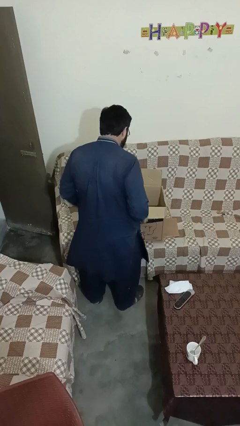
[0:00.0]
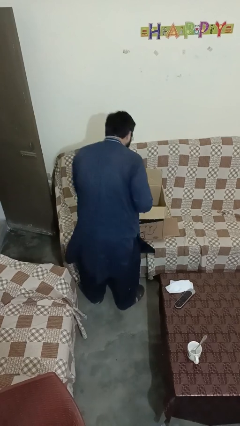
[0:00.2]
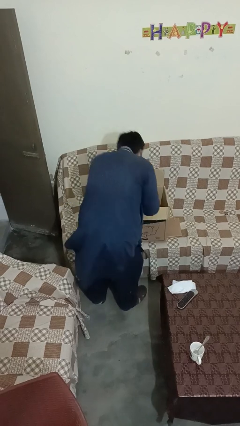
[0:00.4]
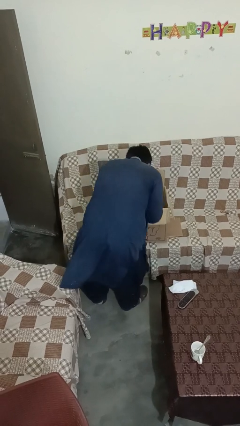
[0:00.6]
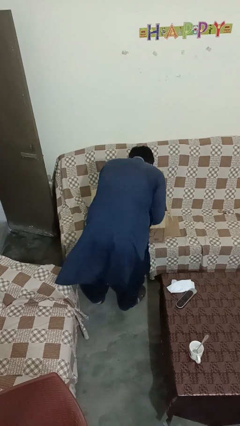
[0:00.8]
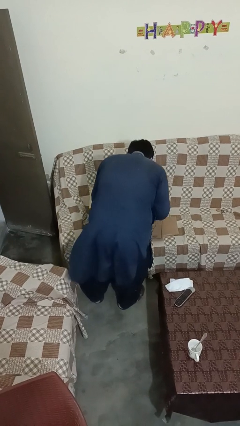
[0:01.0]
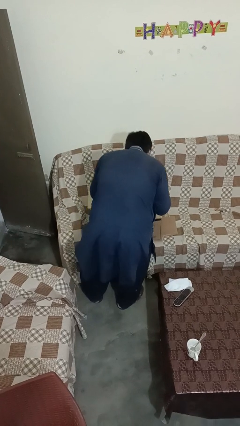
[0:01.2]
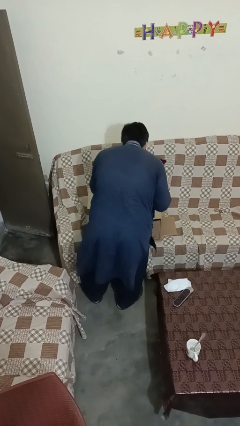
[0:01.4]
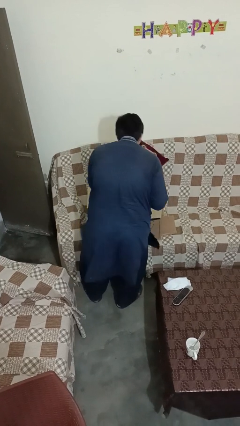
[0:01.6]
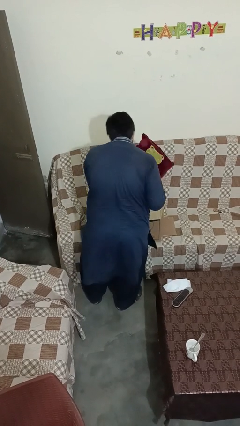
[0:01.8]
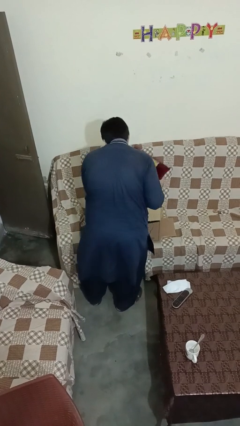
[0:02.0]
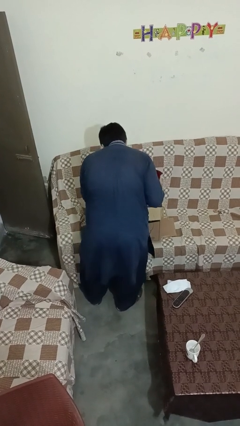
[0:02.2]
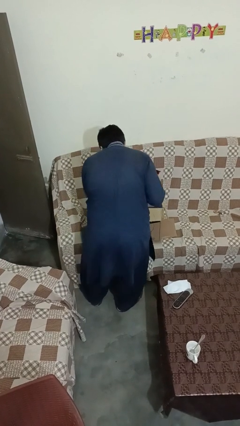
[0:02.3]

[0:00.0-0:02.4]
person searches in box

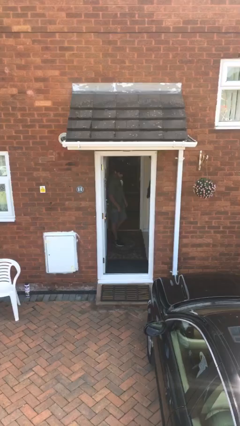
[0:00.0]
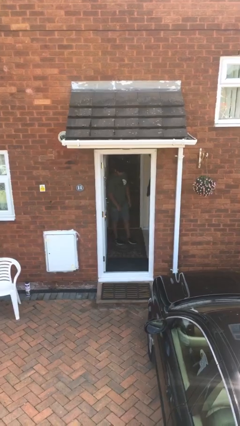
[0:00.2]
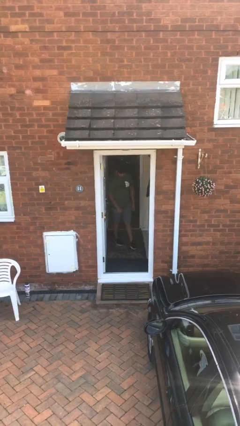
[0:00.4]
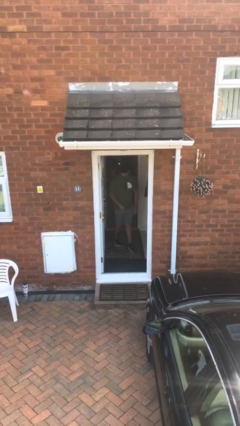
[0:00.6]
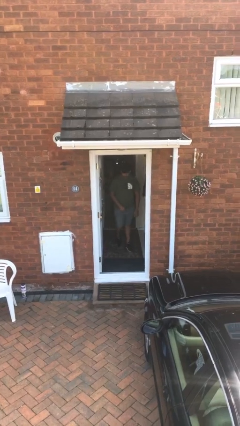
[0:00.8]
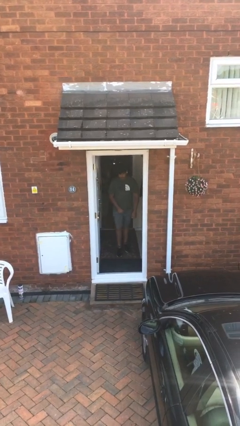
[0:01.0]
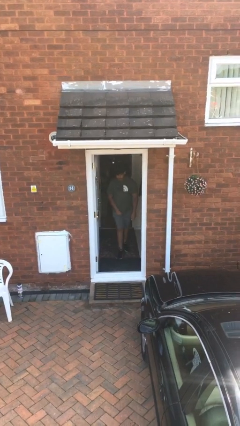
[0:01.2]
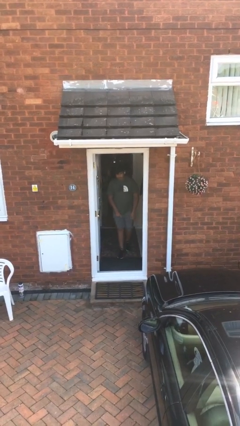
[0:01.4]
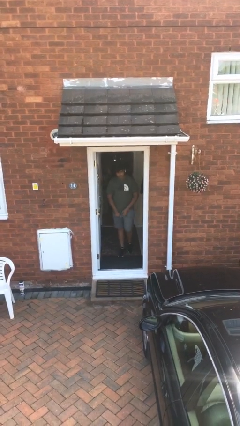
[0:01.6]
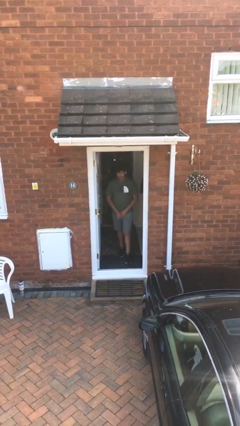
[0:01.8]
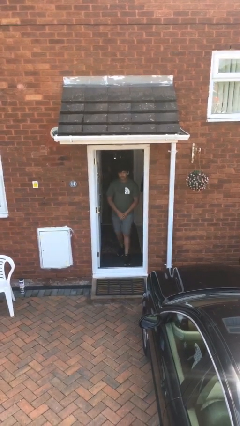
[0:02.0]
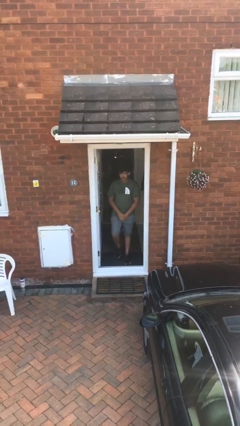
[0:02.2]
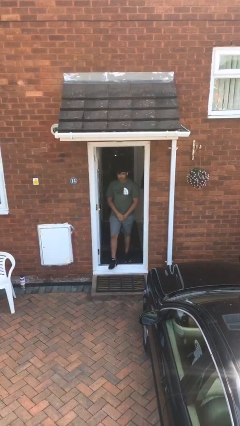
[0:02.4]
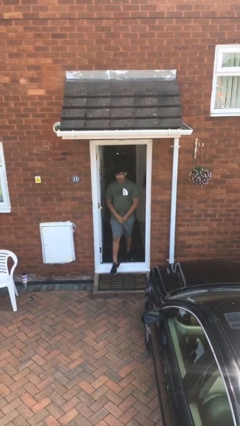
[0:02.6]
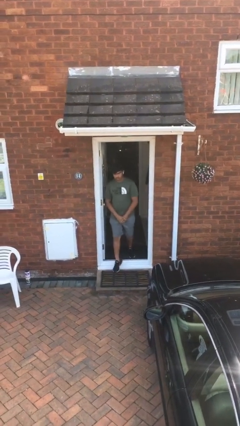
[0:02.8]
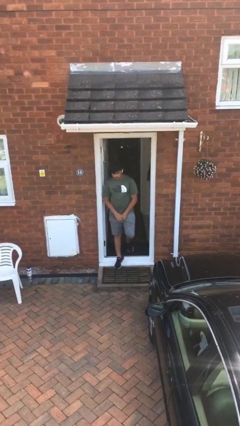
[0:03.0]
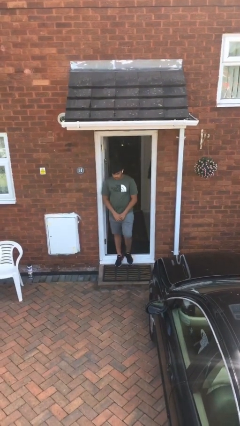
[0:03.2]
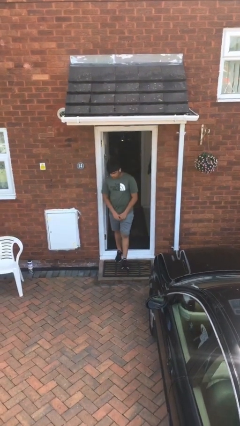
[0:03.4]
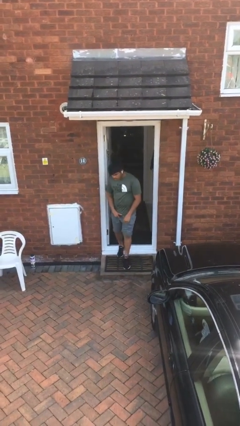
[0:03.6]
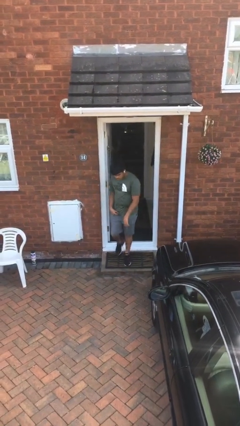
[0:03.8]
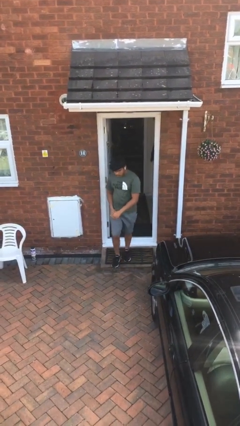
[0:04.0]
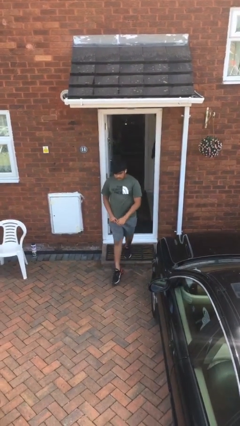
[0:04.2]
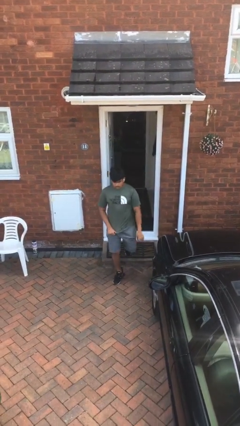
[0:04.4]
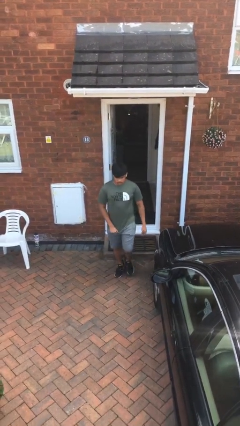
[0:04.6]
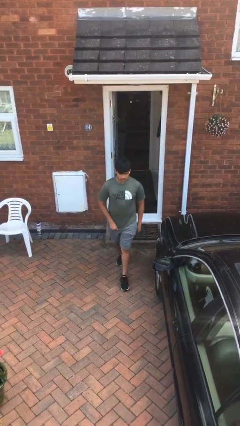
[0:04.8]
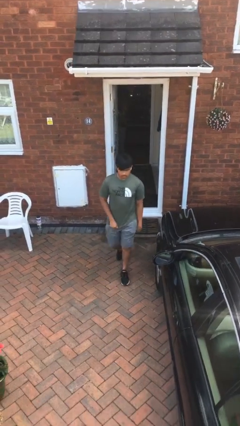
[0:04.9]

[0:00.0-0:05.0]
person enters scene through structure

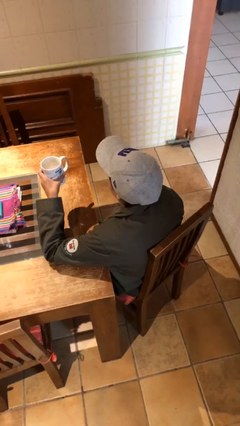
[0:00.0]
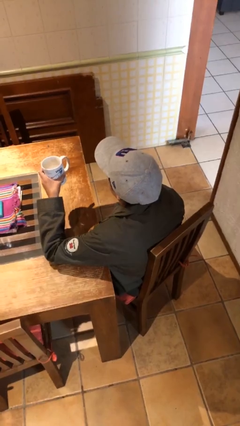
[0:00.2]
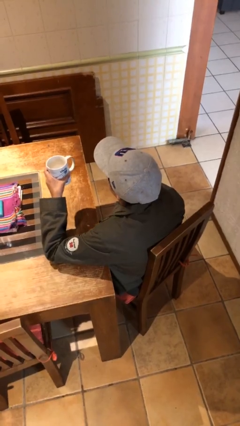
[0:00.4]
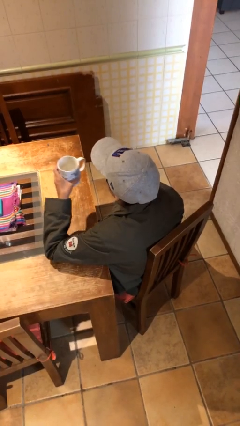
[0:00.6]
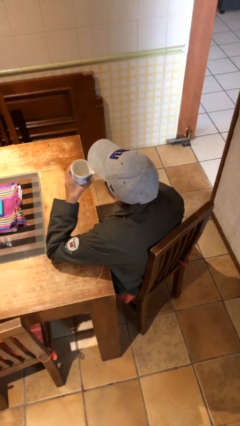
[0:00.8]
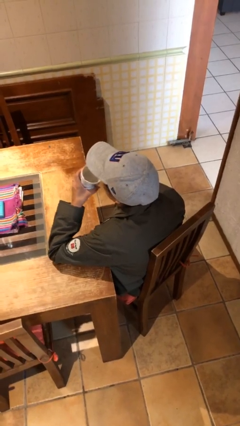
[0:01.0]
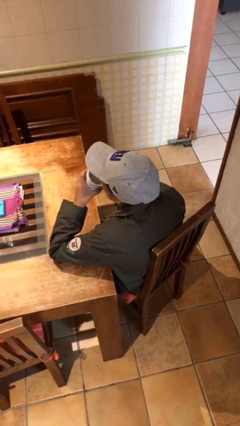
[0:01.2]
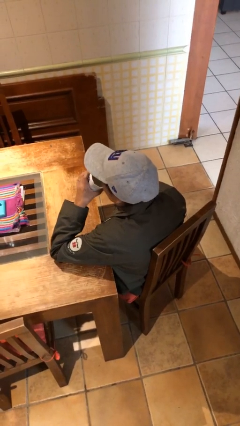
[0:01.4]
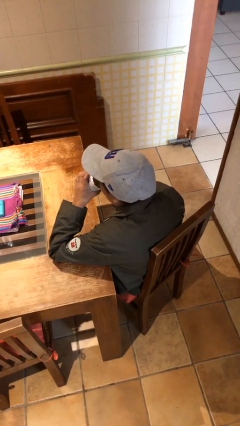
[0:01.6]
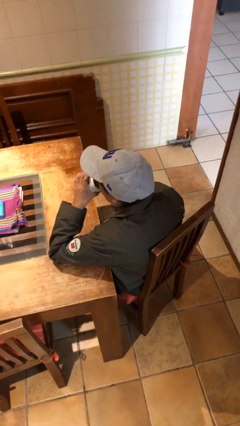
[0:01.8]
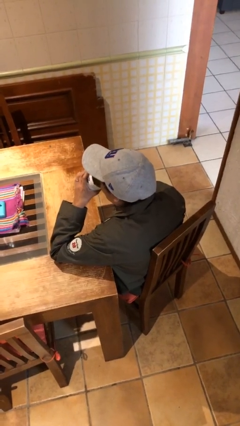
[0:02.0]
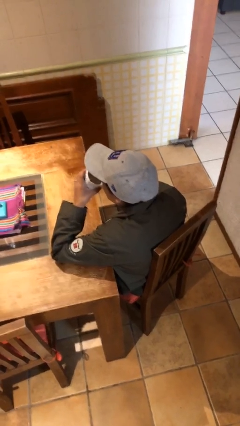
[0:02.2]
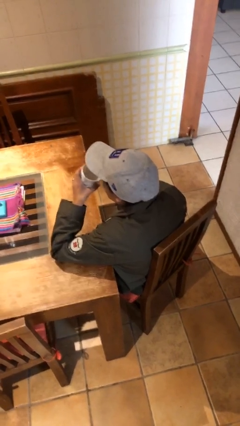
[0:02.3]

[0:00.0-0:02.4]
person drinks from mug

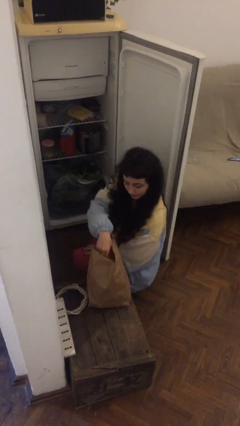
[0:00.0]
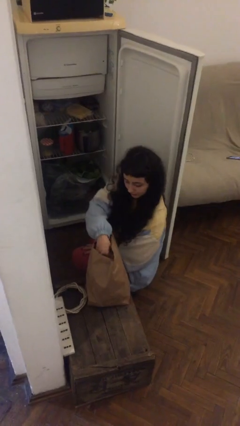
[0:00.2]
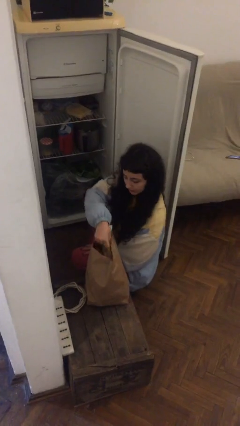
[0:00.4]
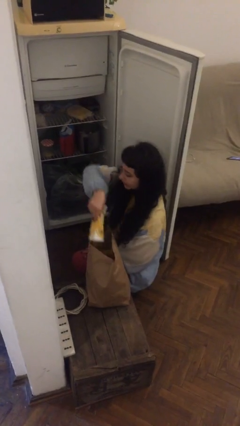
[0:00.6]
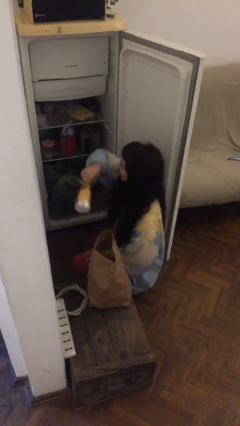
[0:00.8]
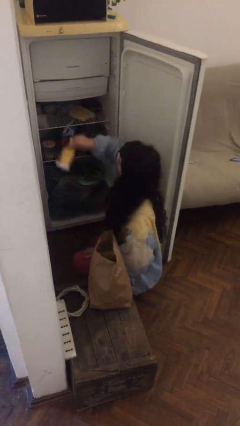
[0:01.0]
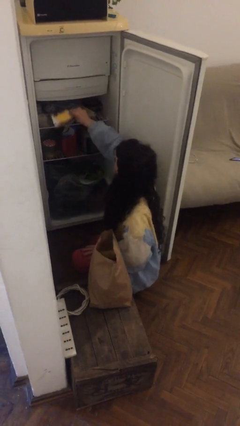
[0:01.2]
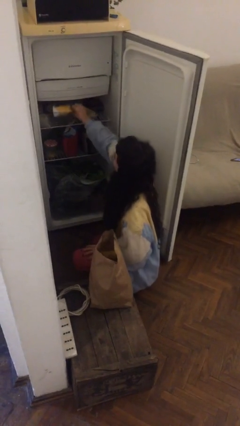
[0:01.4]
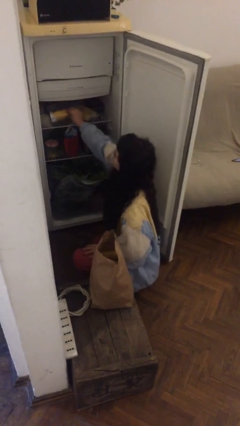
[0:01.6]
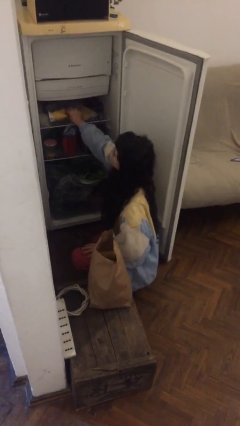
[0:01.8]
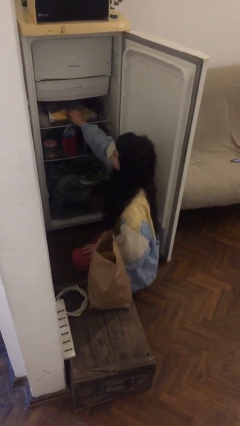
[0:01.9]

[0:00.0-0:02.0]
person loads groceries into refrigerator

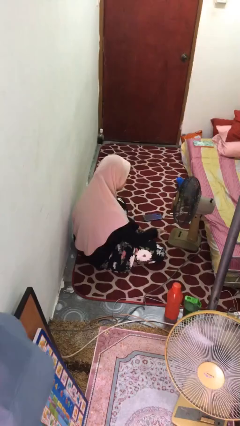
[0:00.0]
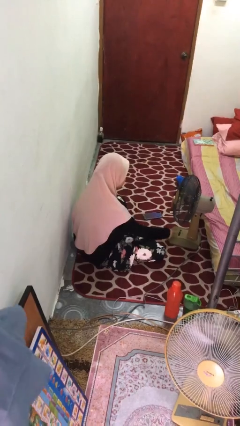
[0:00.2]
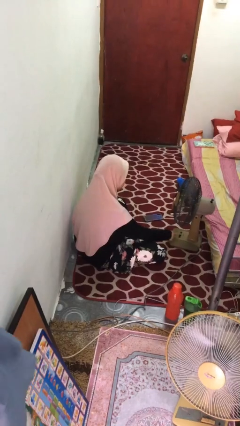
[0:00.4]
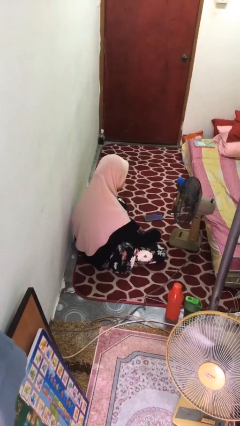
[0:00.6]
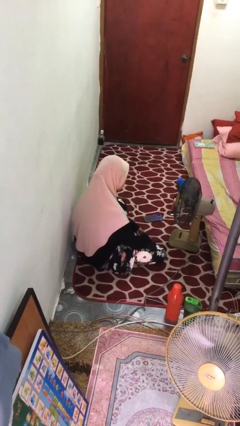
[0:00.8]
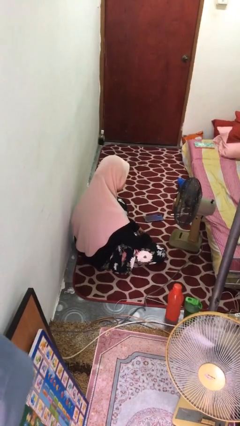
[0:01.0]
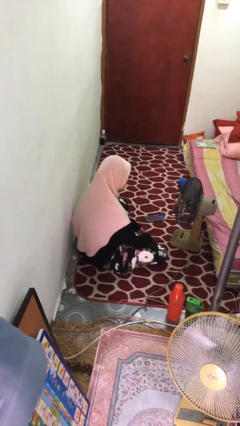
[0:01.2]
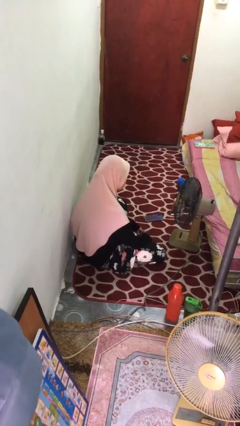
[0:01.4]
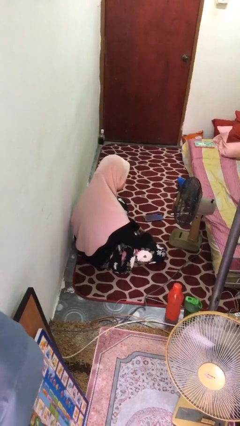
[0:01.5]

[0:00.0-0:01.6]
person turns on fan

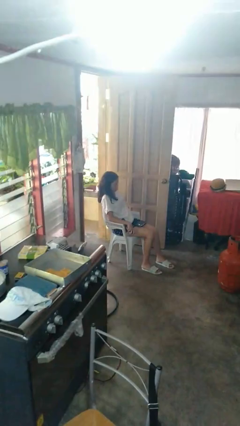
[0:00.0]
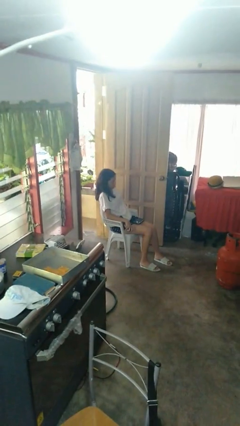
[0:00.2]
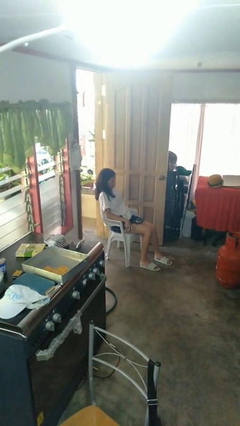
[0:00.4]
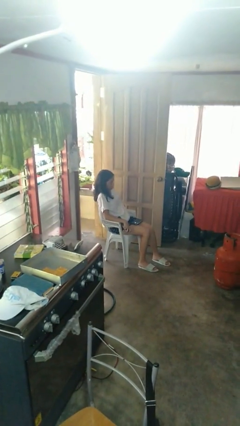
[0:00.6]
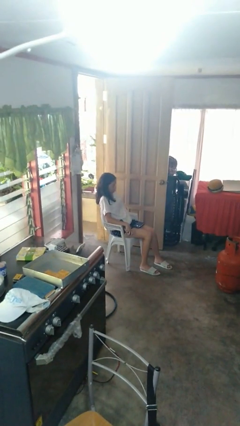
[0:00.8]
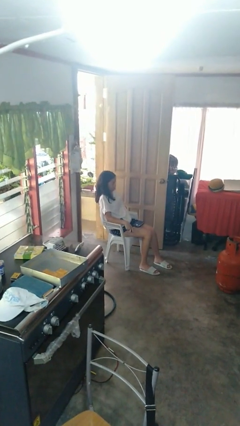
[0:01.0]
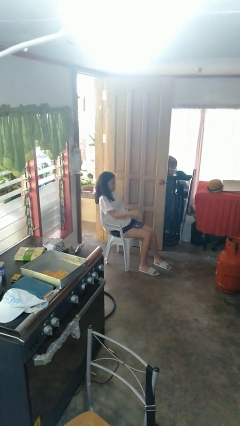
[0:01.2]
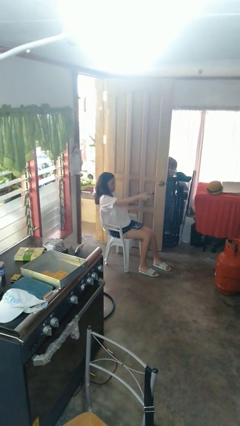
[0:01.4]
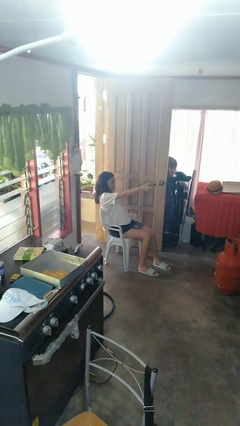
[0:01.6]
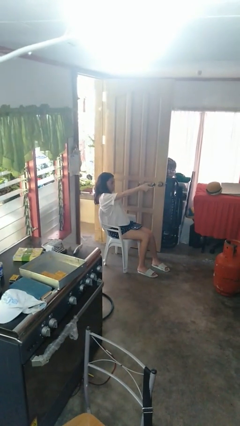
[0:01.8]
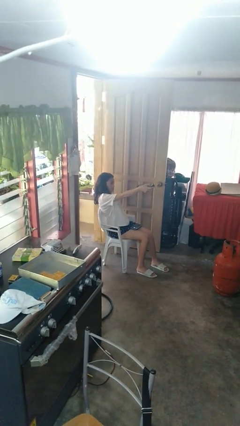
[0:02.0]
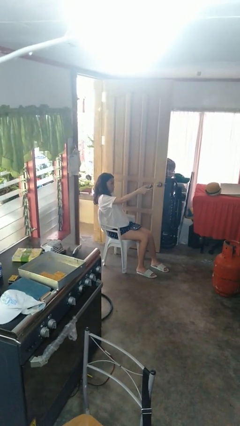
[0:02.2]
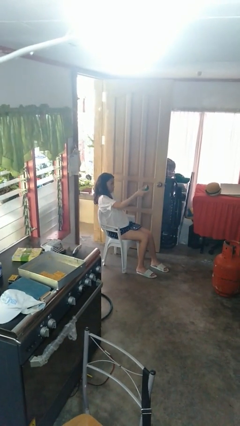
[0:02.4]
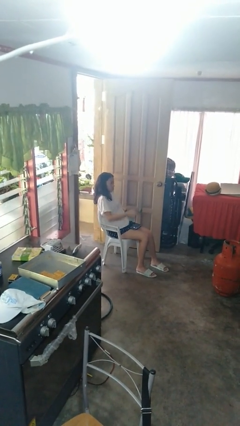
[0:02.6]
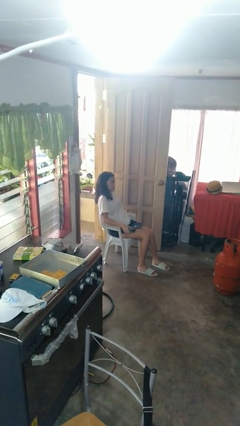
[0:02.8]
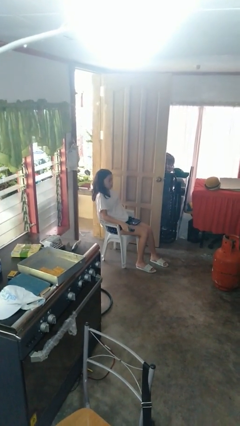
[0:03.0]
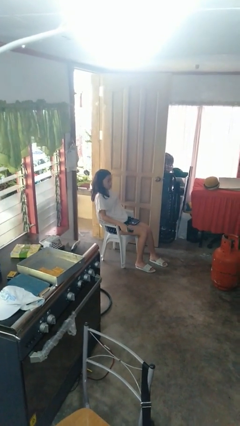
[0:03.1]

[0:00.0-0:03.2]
person uses television remote

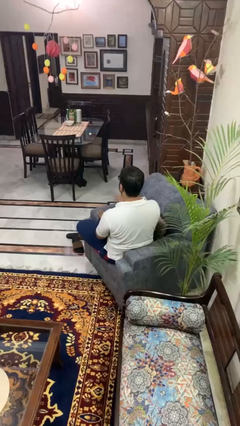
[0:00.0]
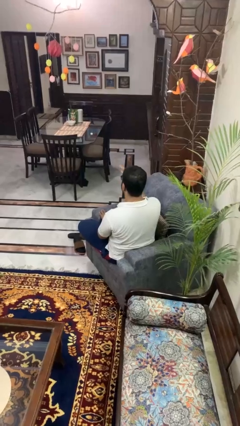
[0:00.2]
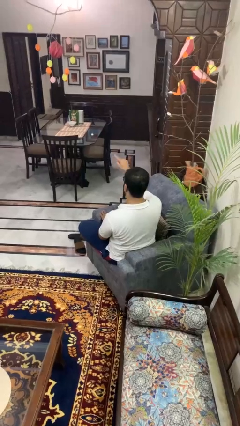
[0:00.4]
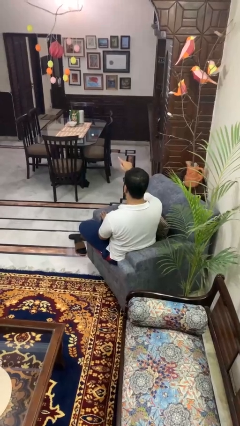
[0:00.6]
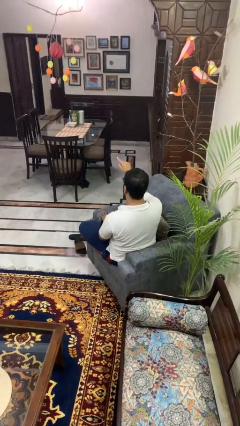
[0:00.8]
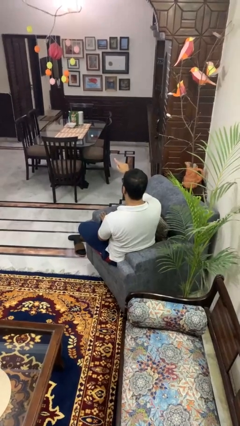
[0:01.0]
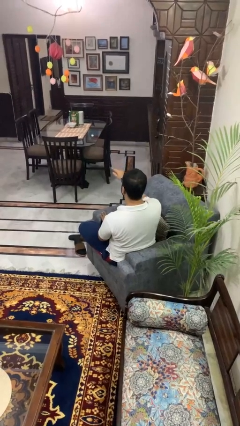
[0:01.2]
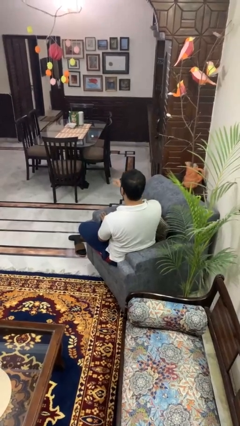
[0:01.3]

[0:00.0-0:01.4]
person points at person
